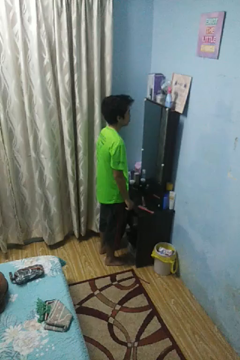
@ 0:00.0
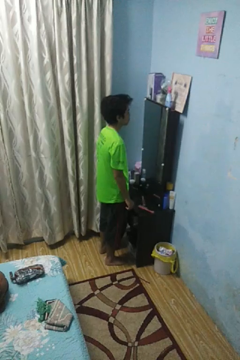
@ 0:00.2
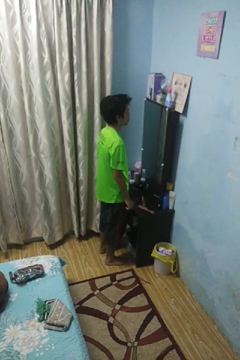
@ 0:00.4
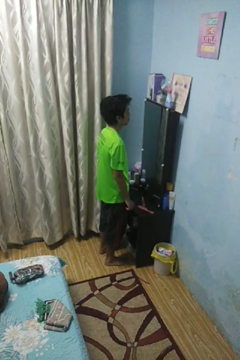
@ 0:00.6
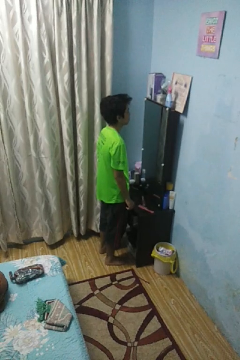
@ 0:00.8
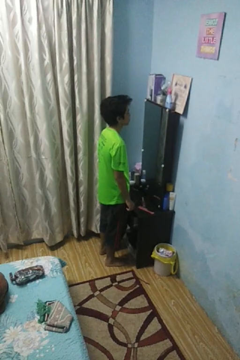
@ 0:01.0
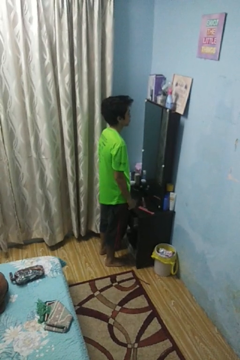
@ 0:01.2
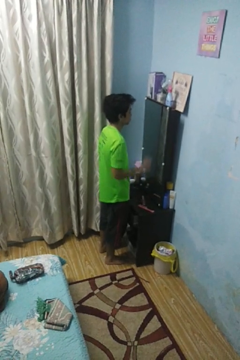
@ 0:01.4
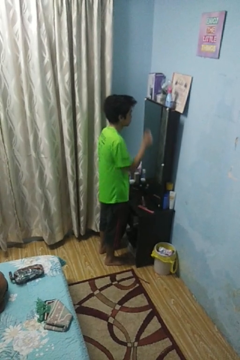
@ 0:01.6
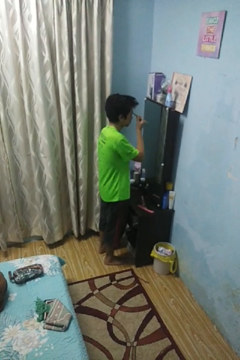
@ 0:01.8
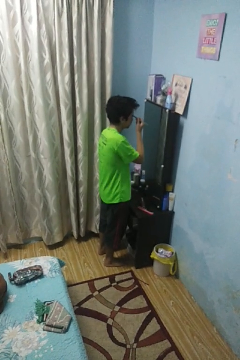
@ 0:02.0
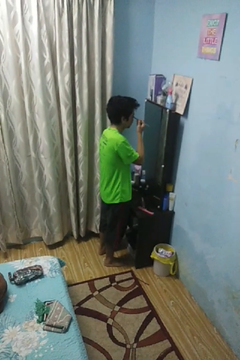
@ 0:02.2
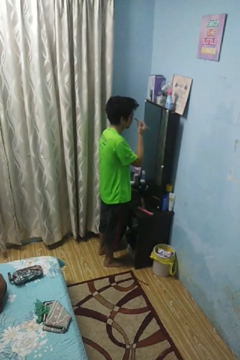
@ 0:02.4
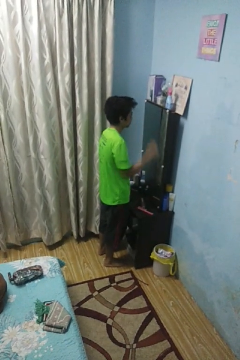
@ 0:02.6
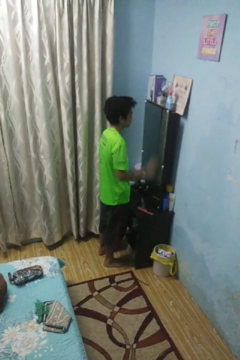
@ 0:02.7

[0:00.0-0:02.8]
person applies eye makeup

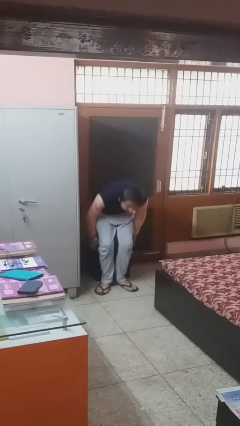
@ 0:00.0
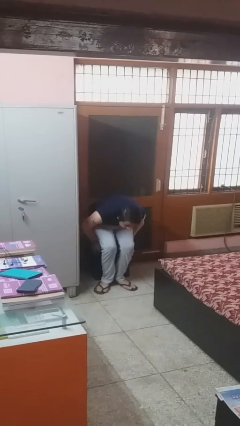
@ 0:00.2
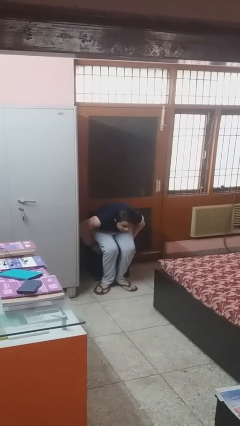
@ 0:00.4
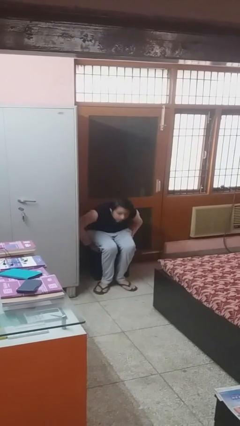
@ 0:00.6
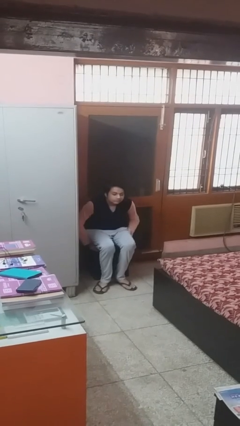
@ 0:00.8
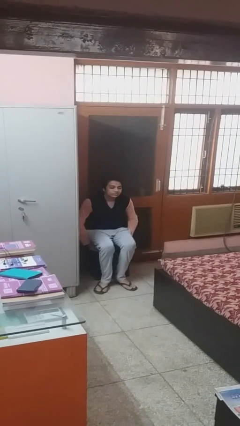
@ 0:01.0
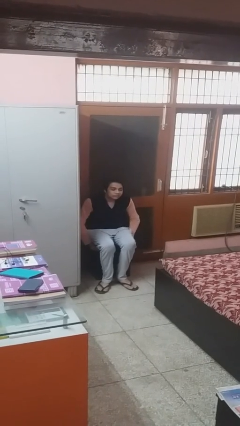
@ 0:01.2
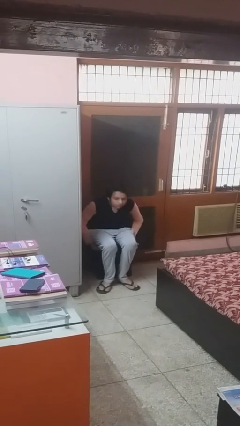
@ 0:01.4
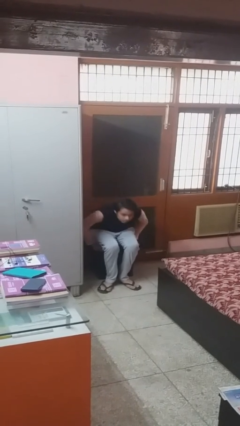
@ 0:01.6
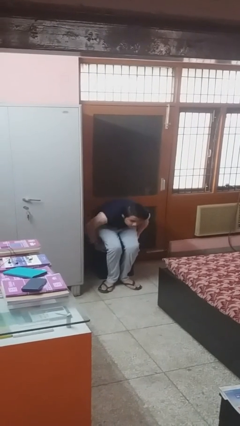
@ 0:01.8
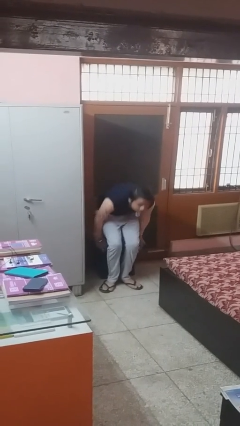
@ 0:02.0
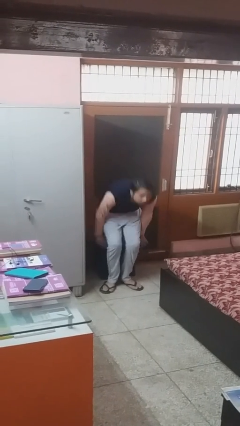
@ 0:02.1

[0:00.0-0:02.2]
person sits down

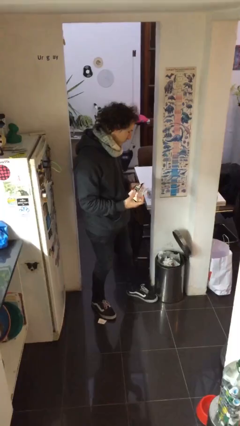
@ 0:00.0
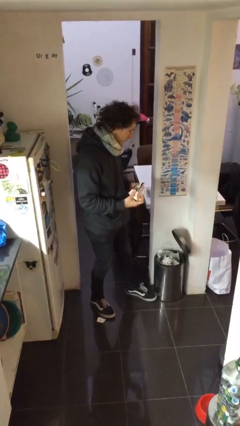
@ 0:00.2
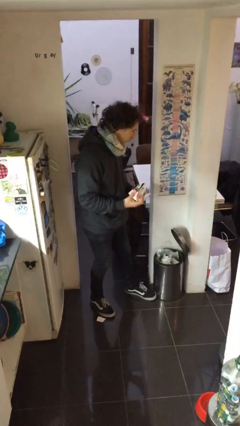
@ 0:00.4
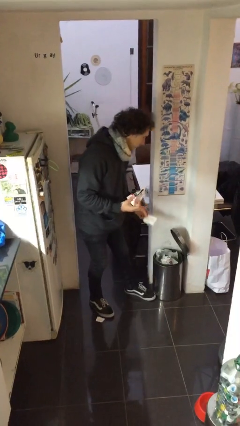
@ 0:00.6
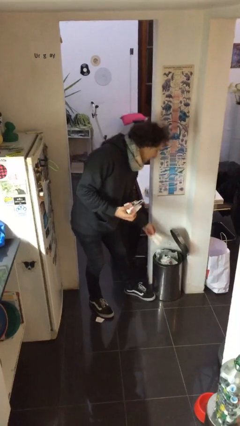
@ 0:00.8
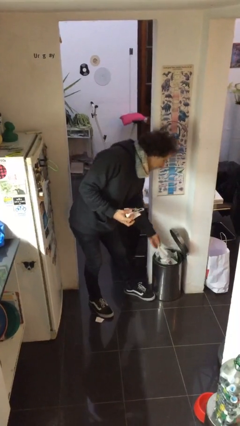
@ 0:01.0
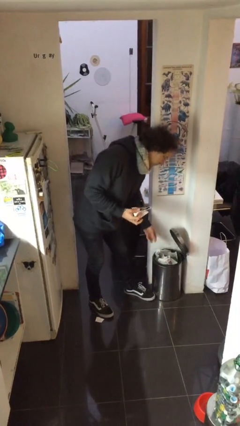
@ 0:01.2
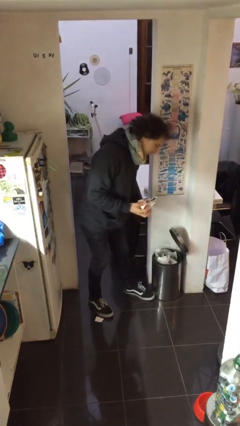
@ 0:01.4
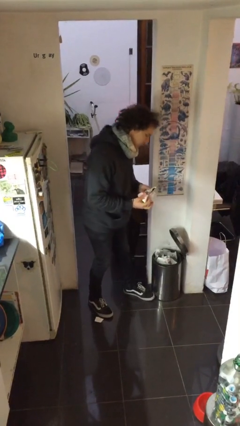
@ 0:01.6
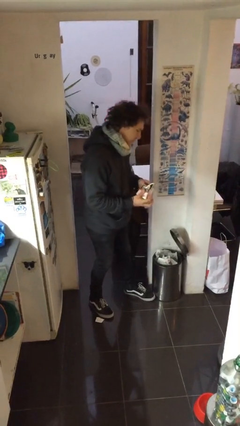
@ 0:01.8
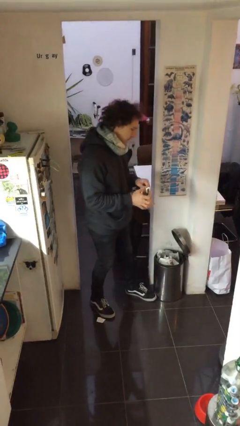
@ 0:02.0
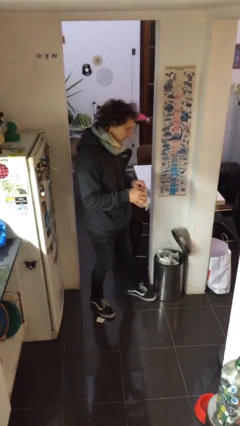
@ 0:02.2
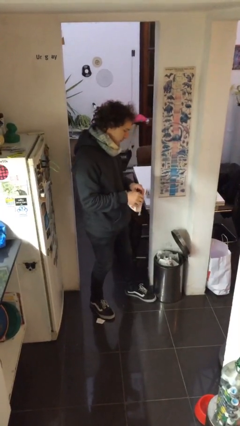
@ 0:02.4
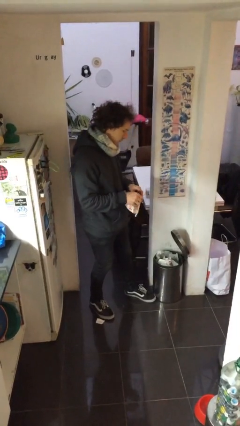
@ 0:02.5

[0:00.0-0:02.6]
person discards trash

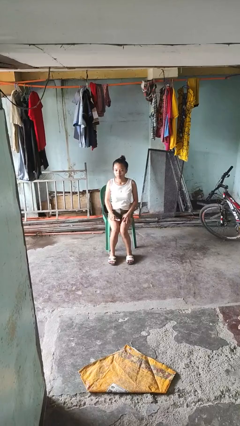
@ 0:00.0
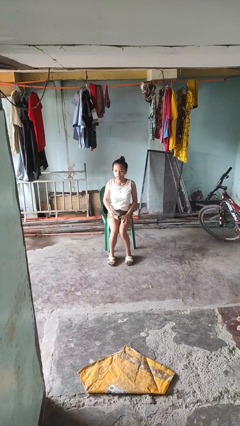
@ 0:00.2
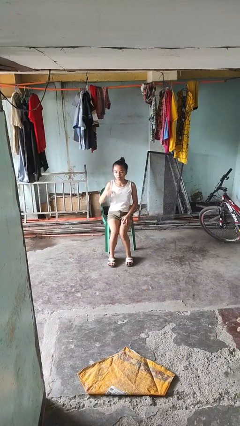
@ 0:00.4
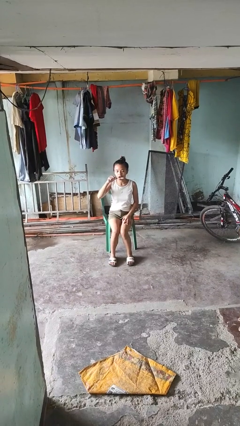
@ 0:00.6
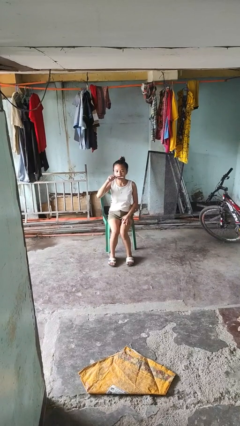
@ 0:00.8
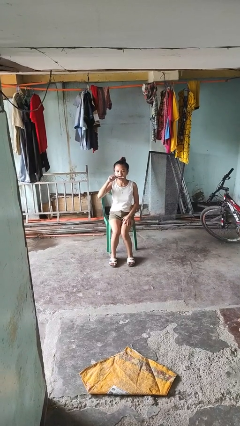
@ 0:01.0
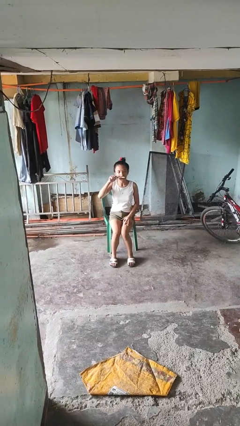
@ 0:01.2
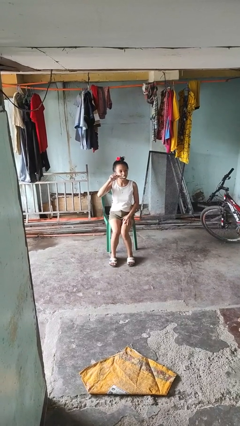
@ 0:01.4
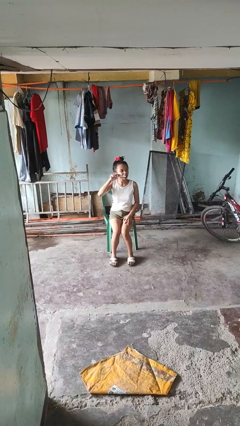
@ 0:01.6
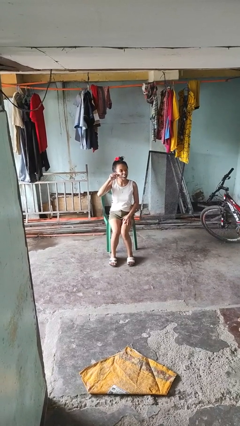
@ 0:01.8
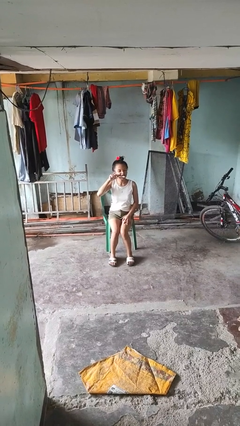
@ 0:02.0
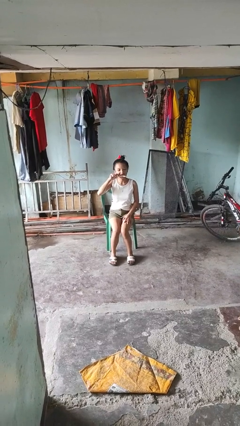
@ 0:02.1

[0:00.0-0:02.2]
person brushes teeth

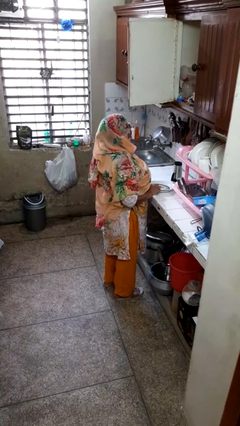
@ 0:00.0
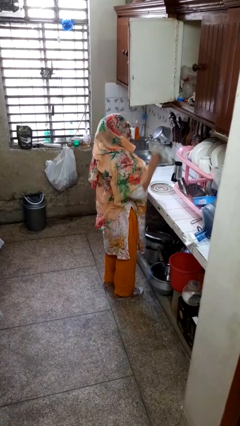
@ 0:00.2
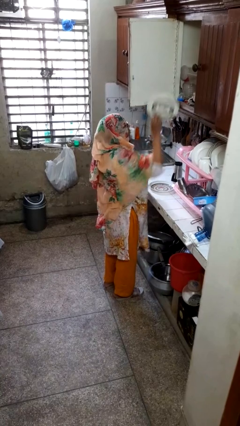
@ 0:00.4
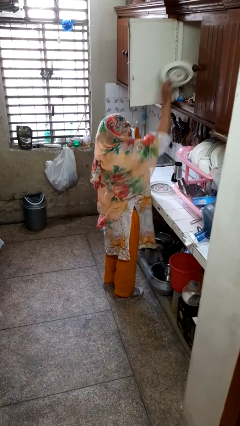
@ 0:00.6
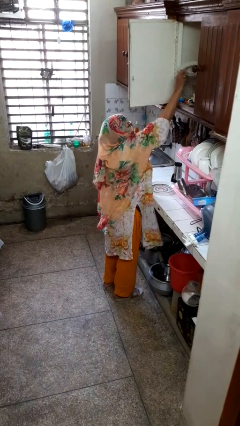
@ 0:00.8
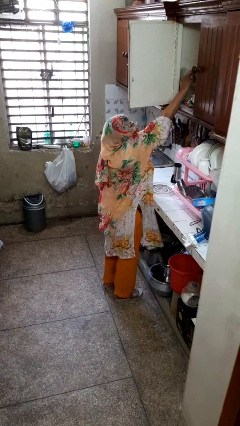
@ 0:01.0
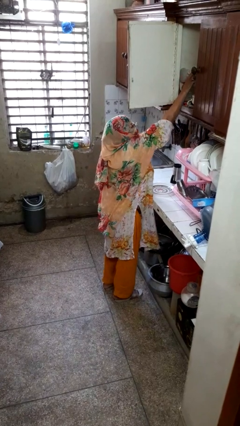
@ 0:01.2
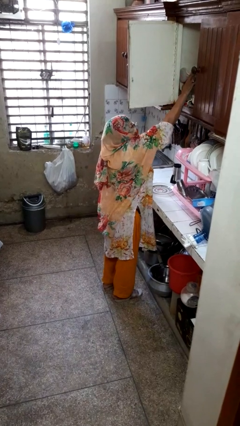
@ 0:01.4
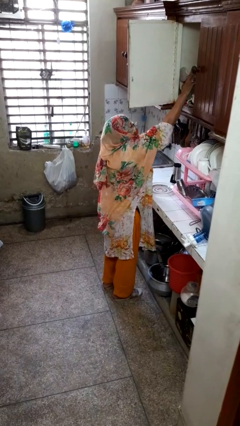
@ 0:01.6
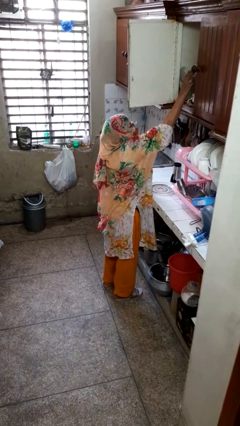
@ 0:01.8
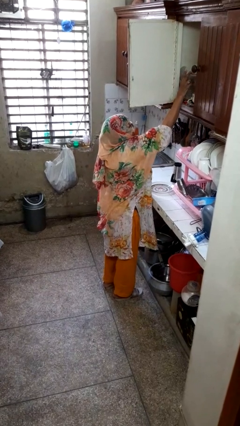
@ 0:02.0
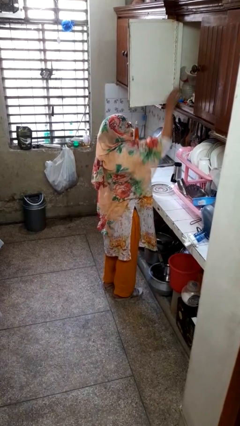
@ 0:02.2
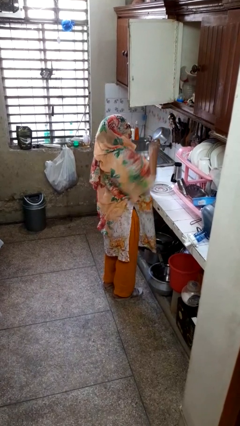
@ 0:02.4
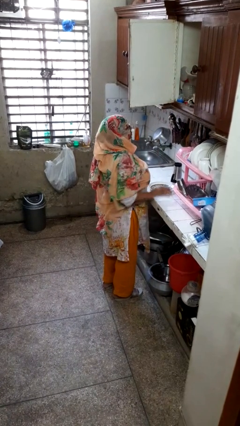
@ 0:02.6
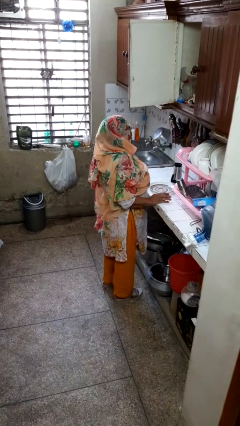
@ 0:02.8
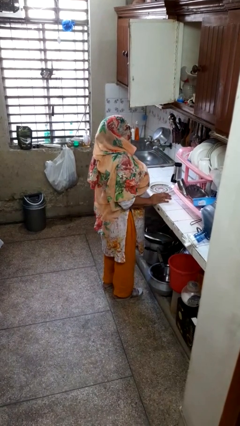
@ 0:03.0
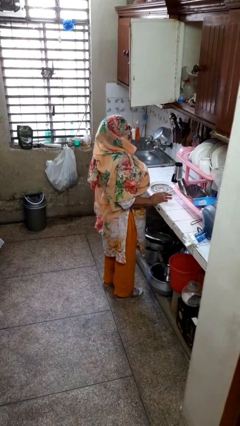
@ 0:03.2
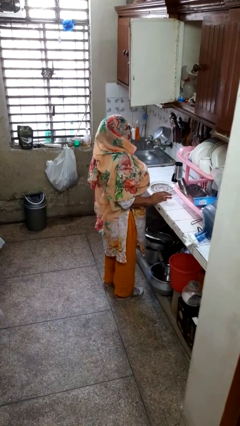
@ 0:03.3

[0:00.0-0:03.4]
person puts object in cabinet

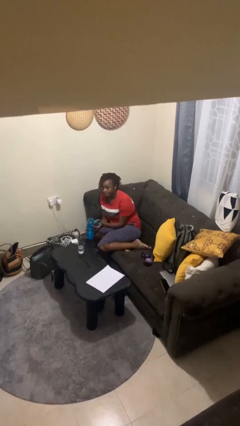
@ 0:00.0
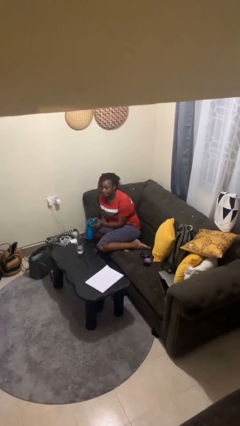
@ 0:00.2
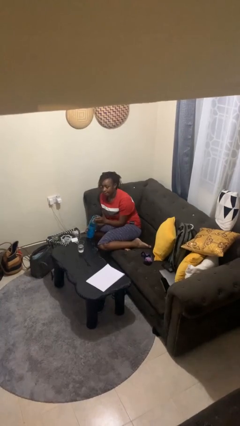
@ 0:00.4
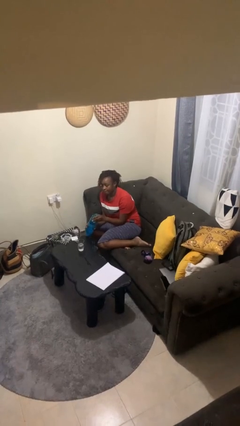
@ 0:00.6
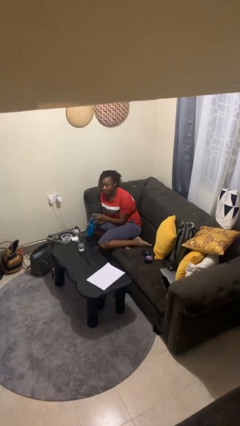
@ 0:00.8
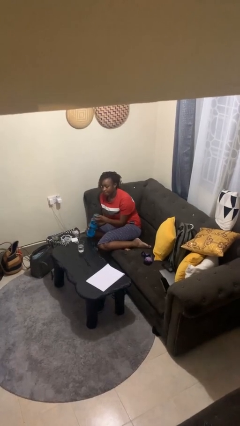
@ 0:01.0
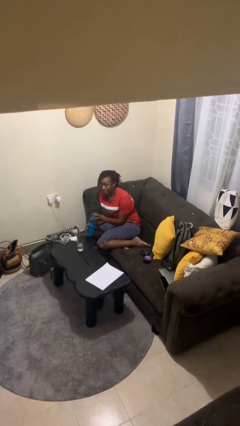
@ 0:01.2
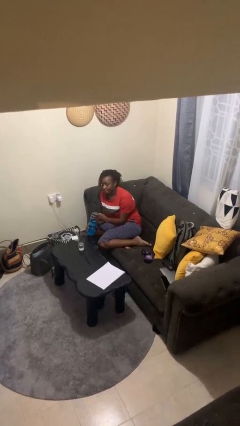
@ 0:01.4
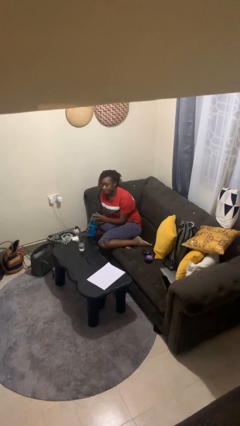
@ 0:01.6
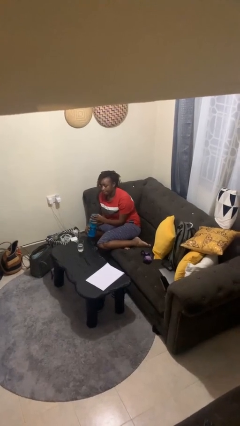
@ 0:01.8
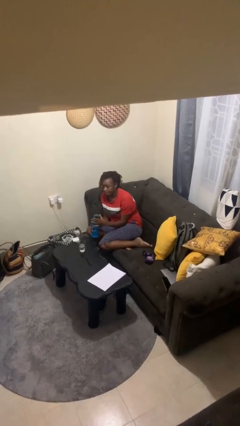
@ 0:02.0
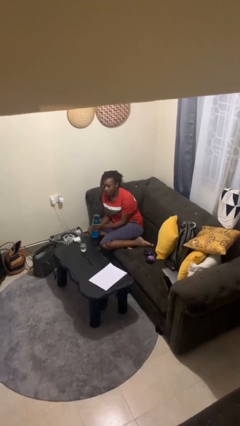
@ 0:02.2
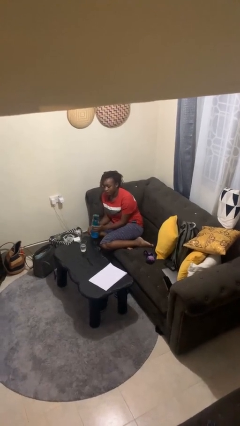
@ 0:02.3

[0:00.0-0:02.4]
person screws lid to bottle

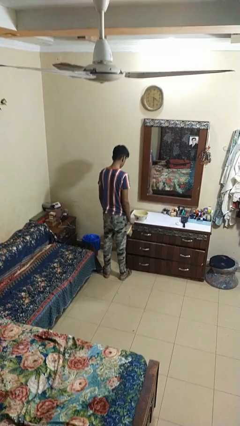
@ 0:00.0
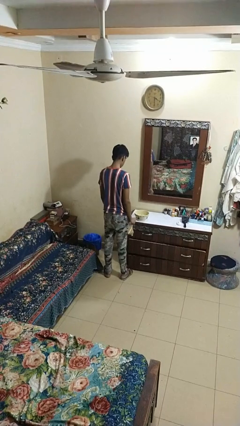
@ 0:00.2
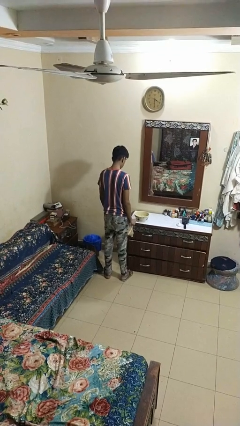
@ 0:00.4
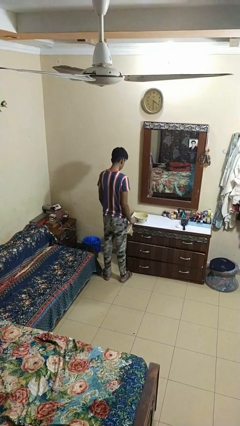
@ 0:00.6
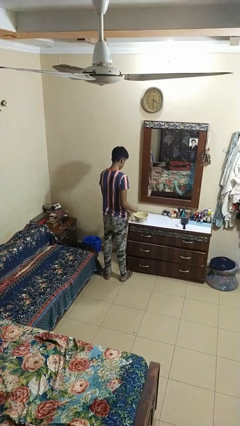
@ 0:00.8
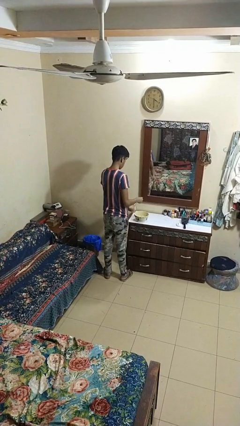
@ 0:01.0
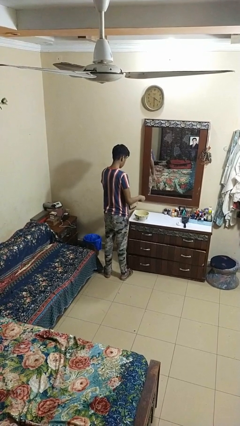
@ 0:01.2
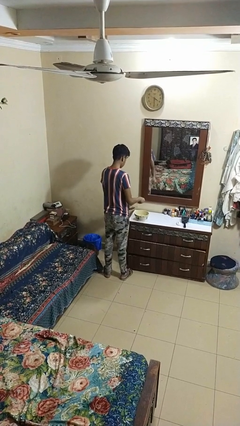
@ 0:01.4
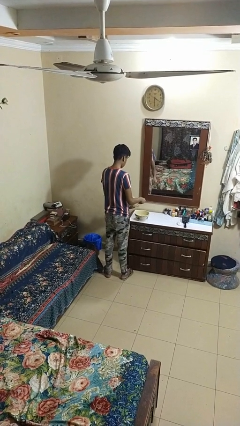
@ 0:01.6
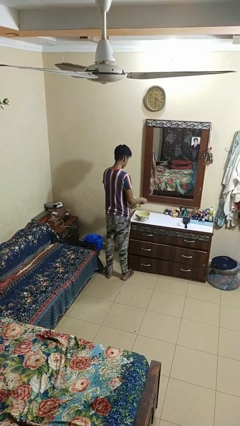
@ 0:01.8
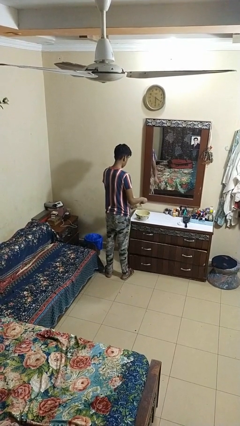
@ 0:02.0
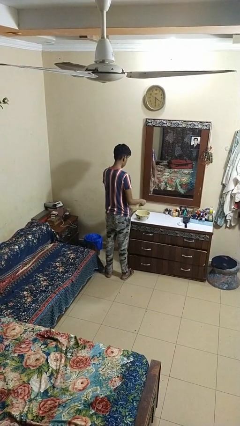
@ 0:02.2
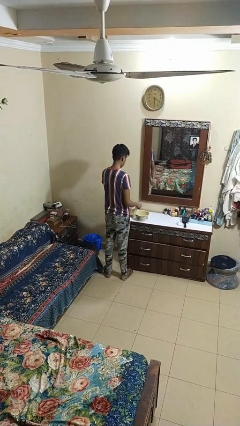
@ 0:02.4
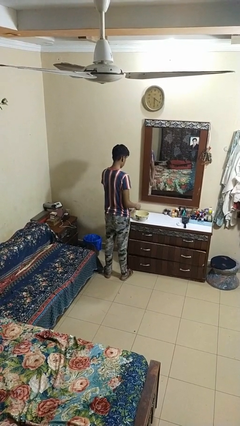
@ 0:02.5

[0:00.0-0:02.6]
person pours into bowl
